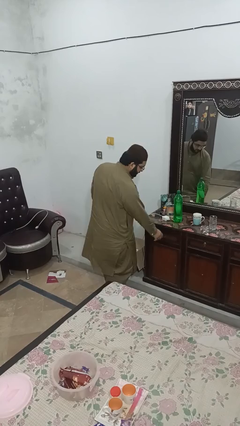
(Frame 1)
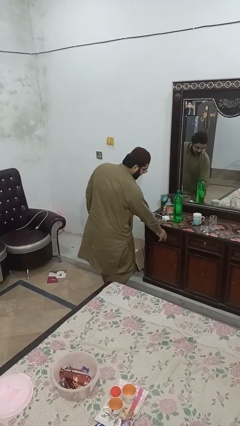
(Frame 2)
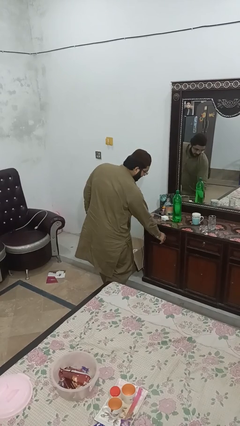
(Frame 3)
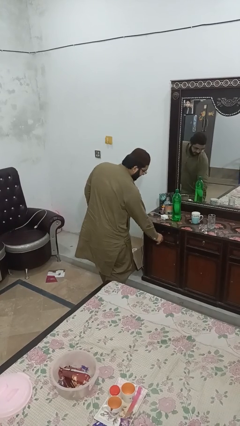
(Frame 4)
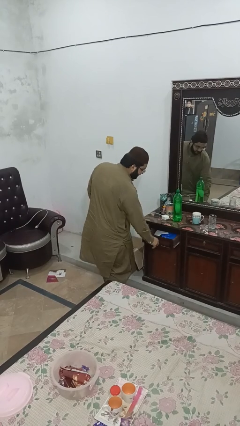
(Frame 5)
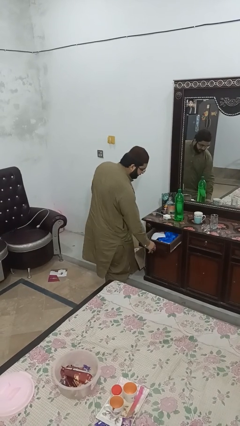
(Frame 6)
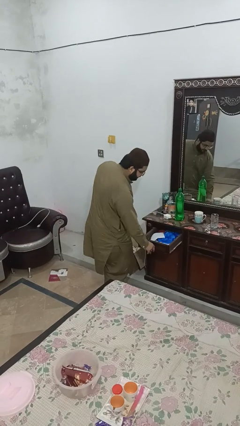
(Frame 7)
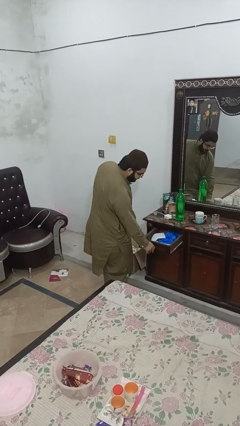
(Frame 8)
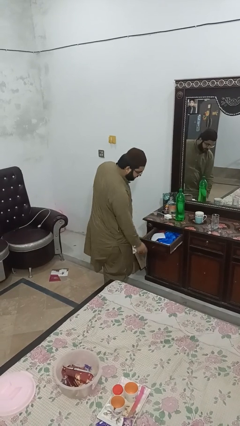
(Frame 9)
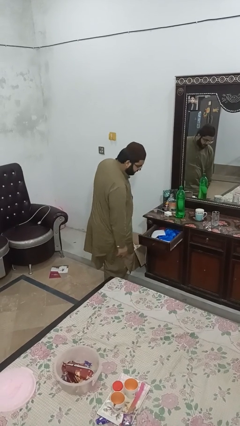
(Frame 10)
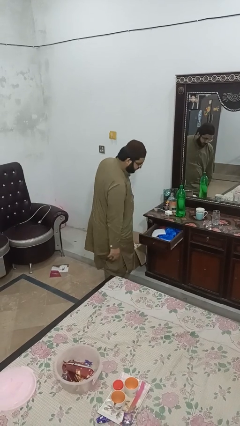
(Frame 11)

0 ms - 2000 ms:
person opens dresser drawer

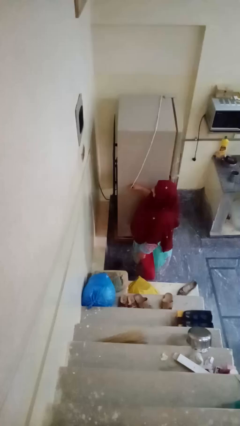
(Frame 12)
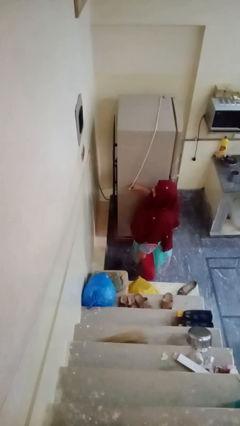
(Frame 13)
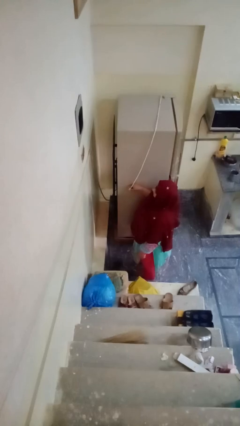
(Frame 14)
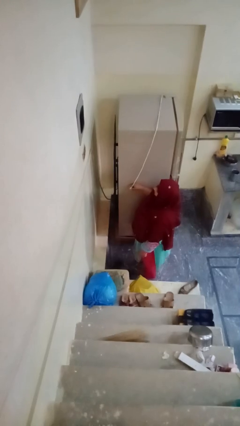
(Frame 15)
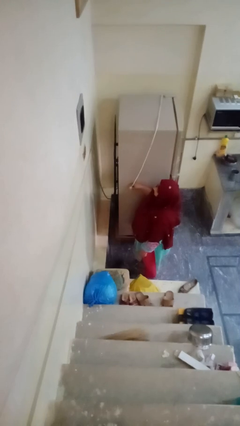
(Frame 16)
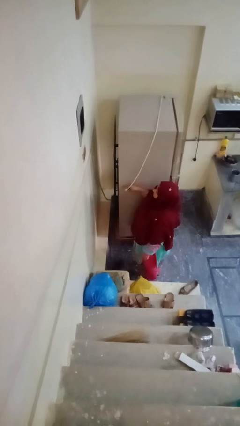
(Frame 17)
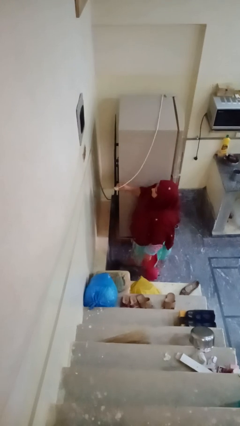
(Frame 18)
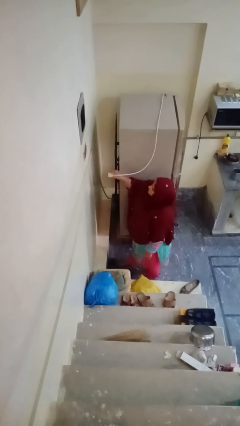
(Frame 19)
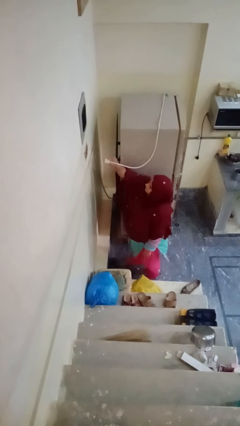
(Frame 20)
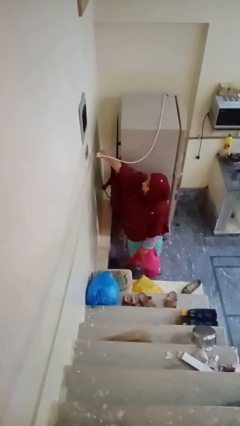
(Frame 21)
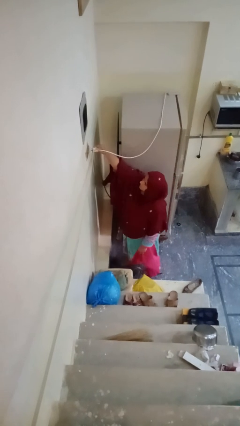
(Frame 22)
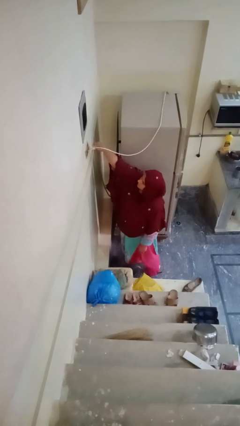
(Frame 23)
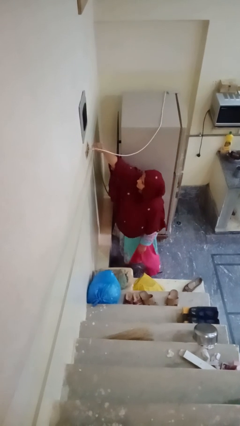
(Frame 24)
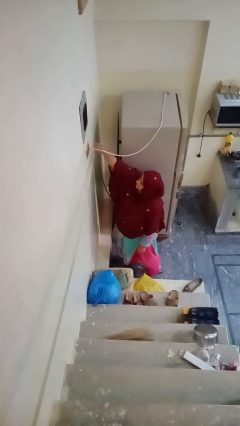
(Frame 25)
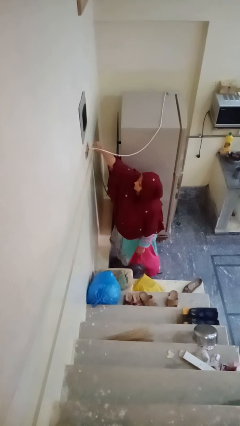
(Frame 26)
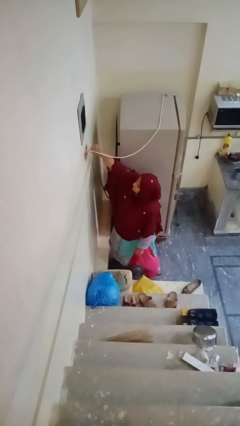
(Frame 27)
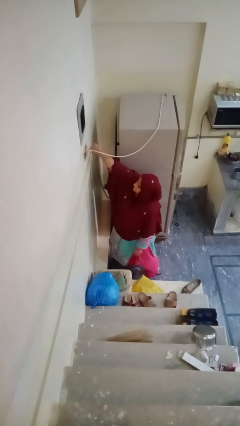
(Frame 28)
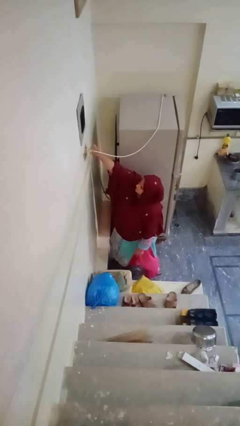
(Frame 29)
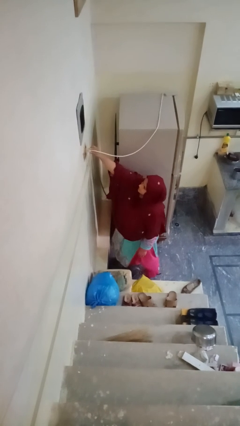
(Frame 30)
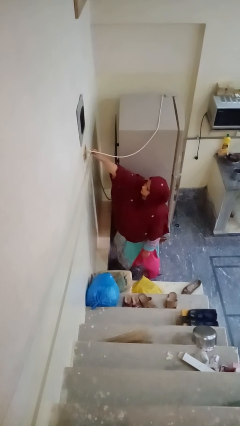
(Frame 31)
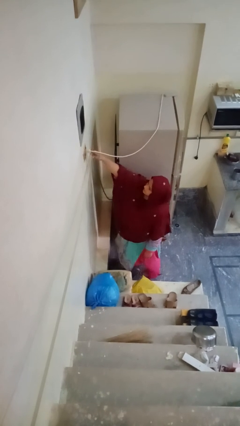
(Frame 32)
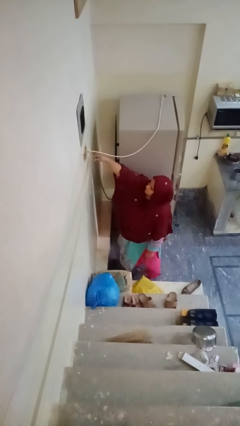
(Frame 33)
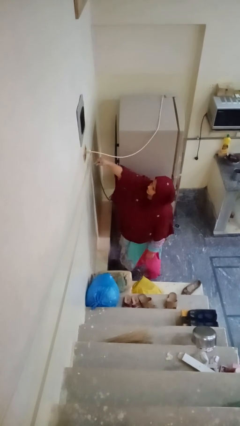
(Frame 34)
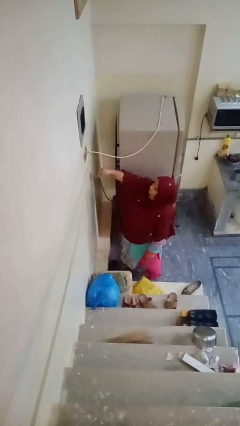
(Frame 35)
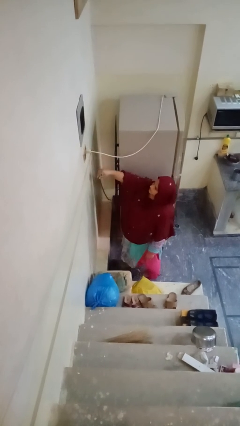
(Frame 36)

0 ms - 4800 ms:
person plugs into electrical socket

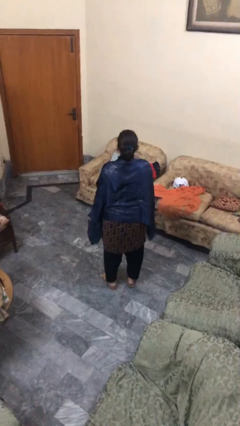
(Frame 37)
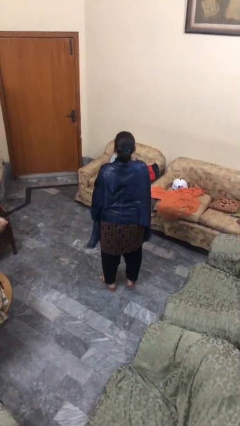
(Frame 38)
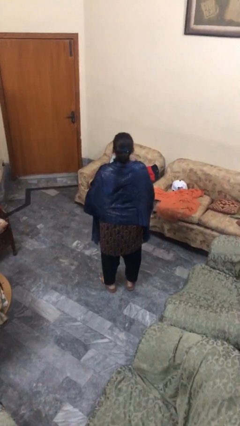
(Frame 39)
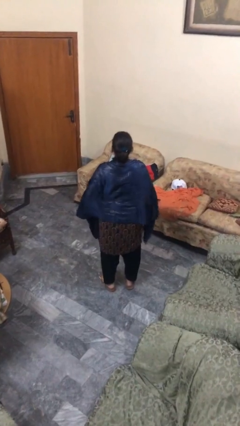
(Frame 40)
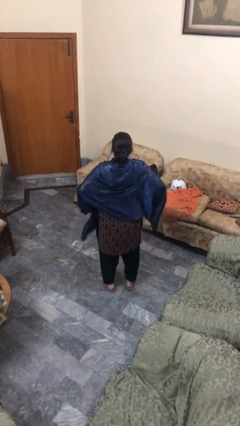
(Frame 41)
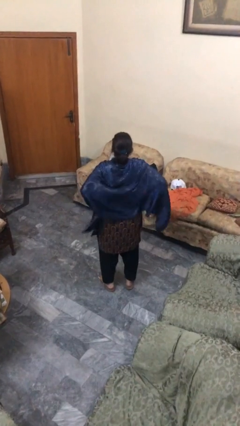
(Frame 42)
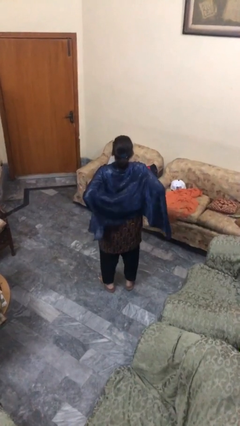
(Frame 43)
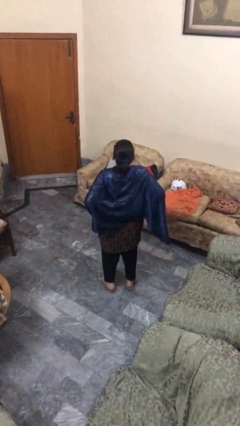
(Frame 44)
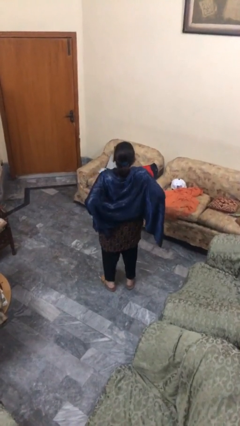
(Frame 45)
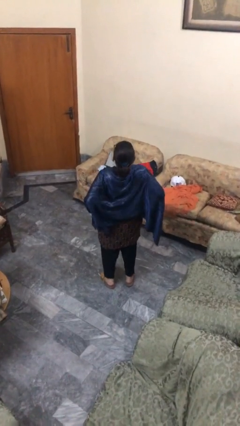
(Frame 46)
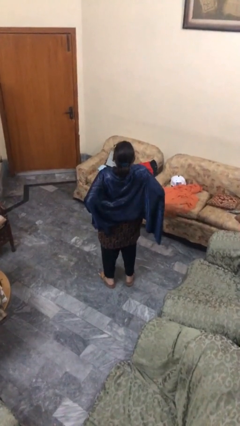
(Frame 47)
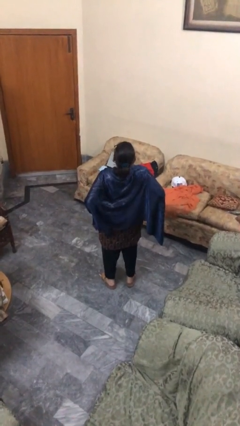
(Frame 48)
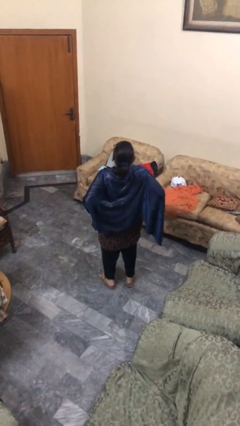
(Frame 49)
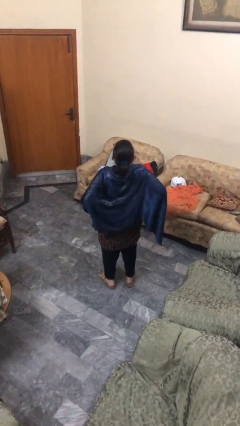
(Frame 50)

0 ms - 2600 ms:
person stretches back

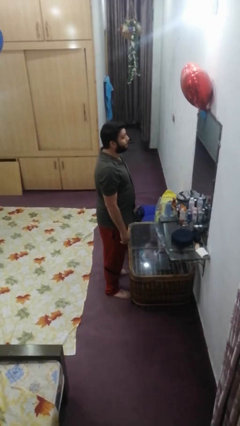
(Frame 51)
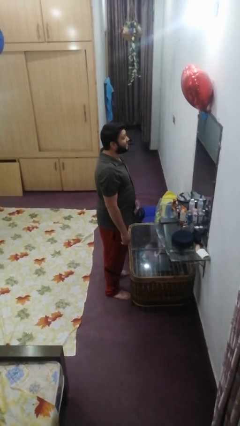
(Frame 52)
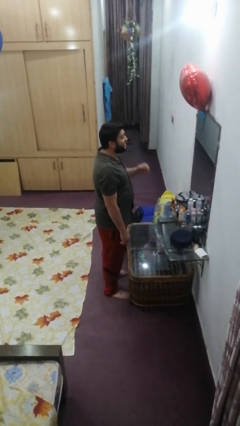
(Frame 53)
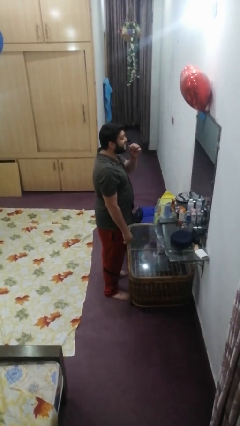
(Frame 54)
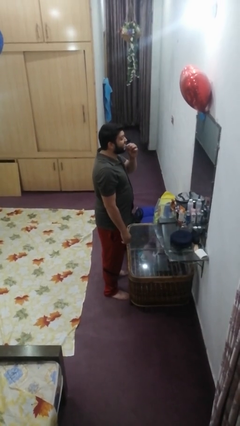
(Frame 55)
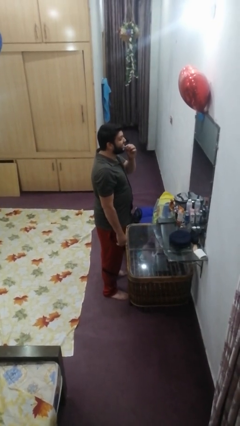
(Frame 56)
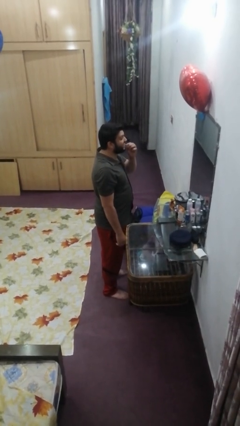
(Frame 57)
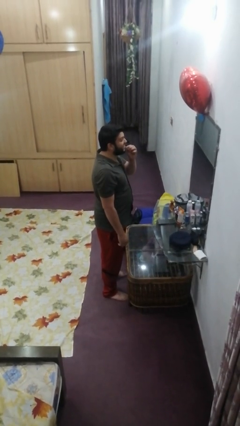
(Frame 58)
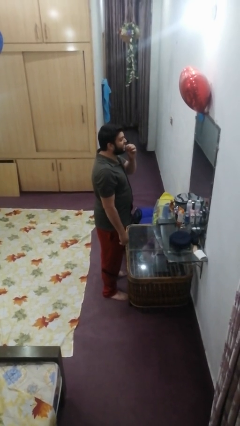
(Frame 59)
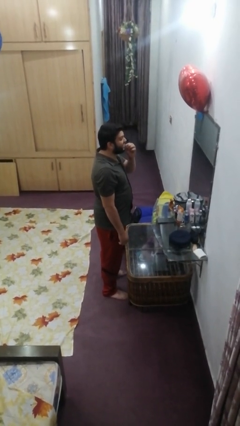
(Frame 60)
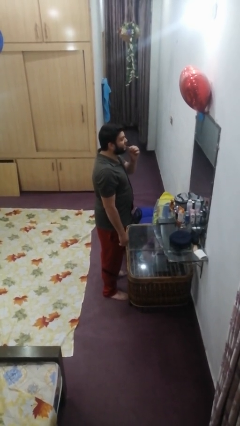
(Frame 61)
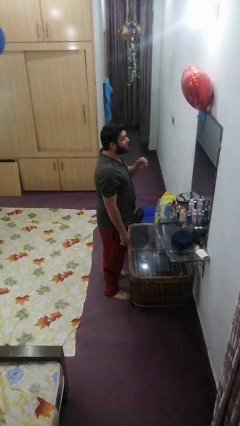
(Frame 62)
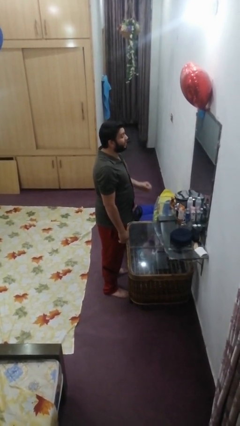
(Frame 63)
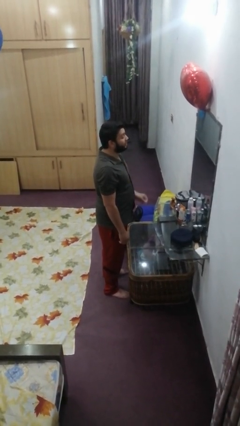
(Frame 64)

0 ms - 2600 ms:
person flosses

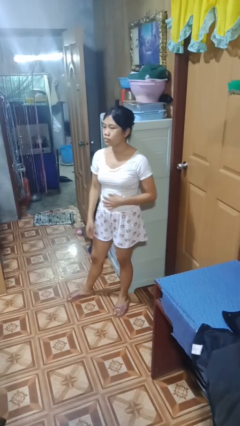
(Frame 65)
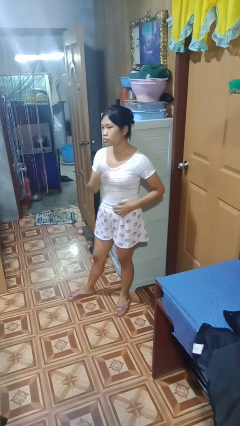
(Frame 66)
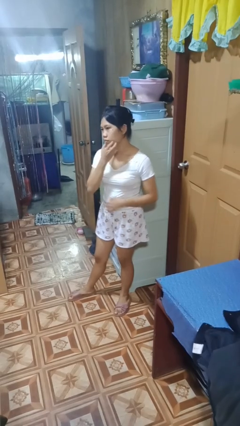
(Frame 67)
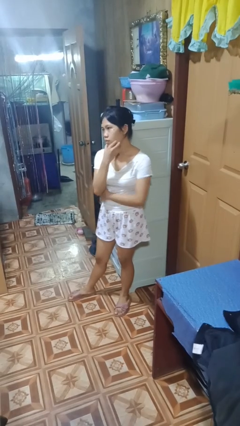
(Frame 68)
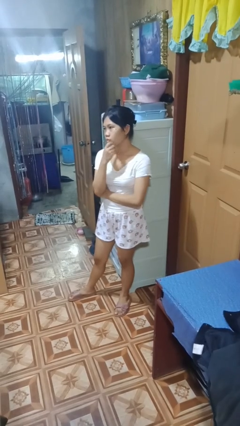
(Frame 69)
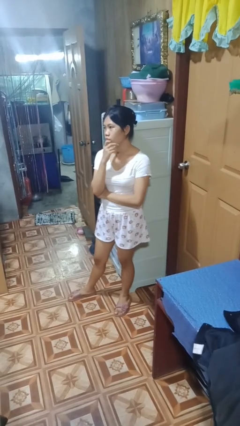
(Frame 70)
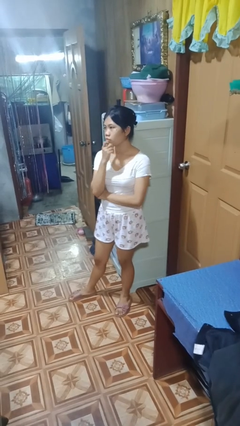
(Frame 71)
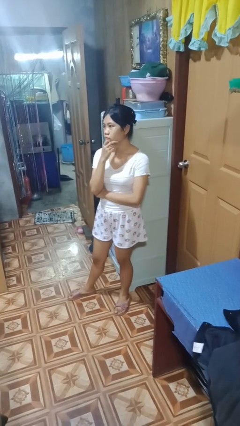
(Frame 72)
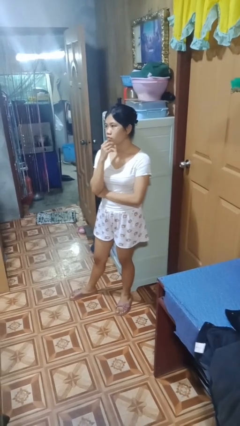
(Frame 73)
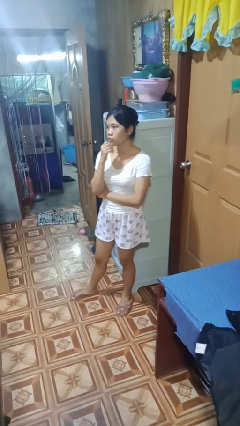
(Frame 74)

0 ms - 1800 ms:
person strokes chin

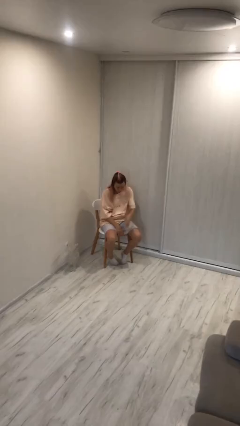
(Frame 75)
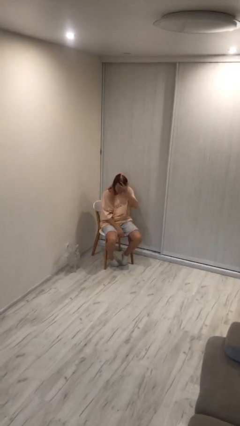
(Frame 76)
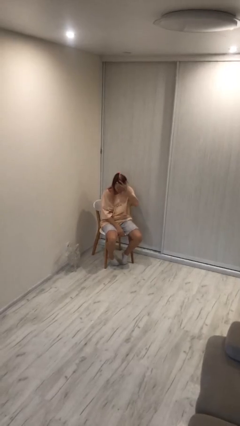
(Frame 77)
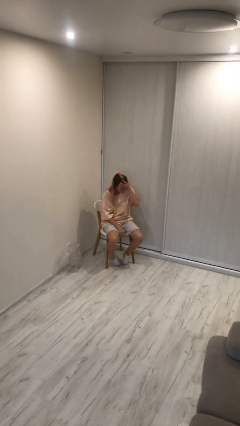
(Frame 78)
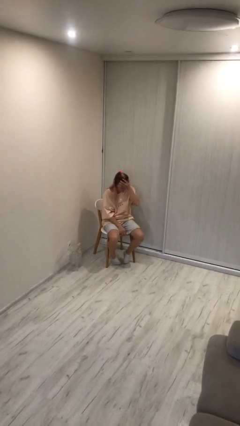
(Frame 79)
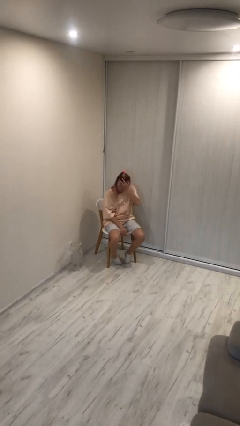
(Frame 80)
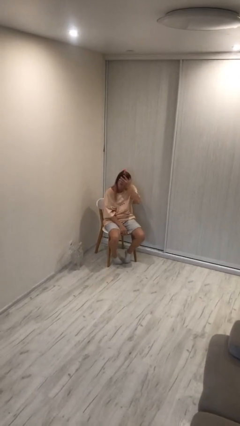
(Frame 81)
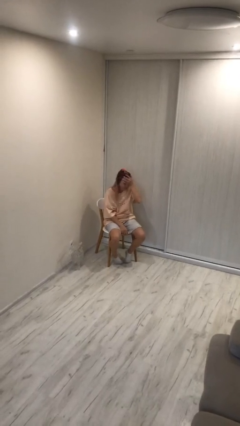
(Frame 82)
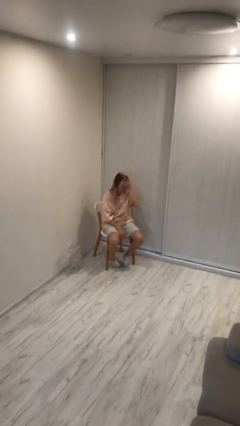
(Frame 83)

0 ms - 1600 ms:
person covers face with hands

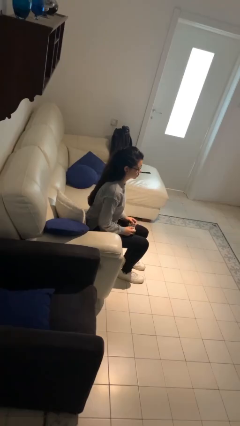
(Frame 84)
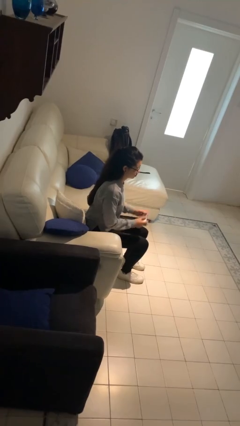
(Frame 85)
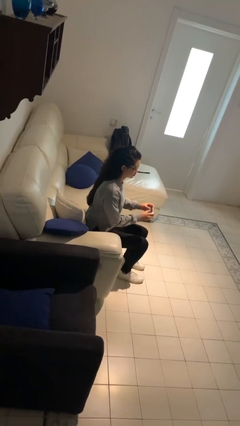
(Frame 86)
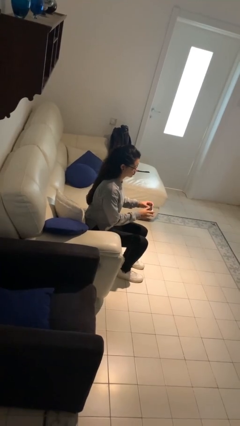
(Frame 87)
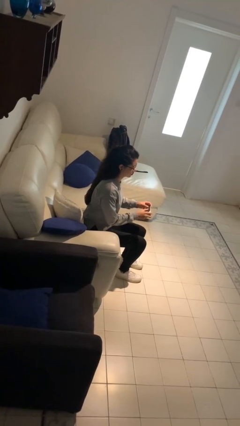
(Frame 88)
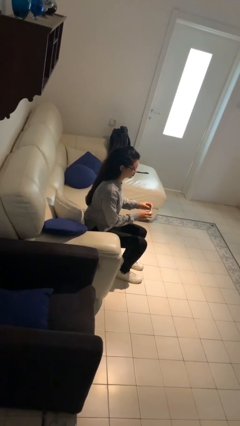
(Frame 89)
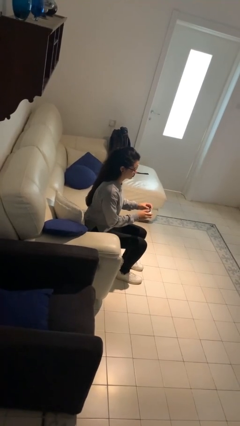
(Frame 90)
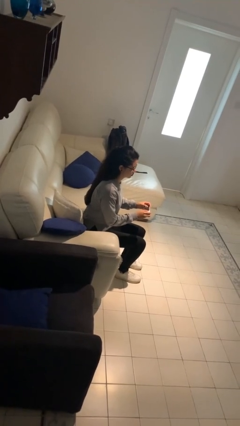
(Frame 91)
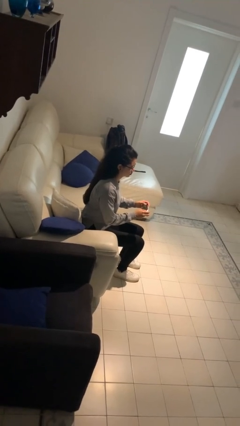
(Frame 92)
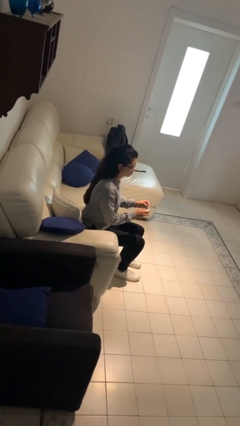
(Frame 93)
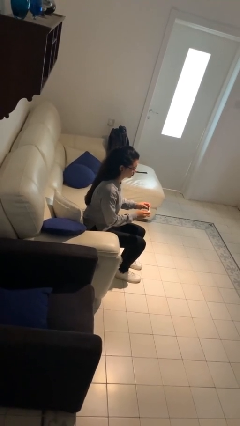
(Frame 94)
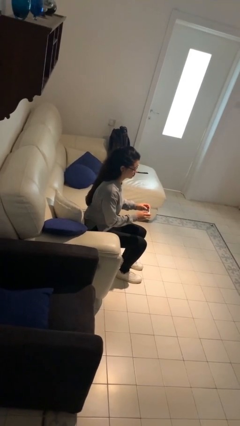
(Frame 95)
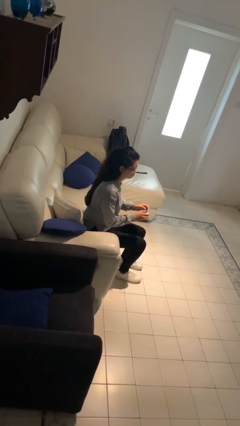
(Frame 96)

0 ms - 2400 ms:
person interacts with handheld game
